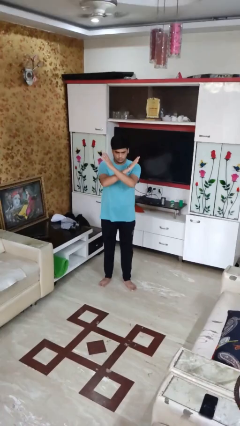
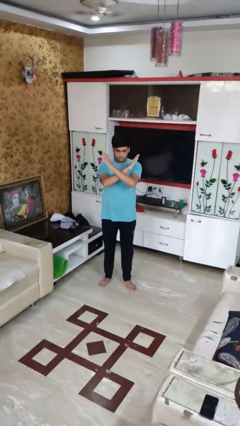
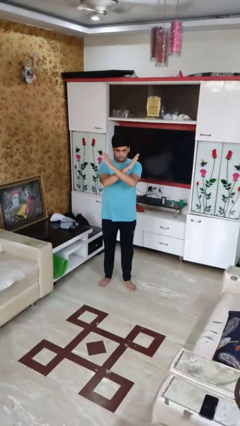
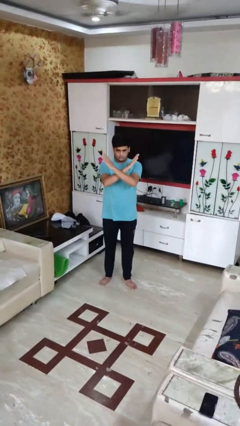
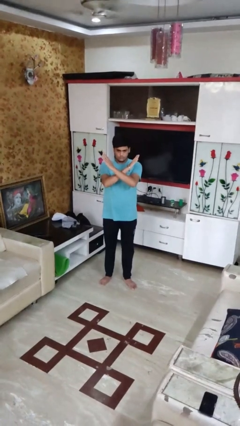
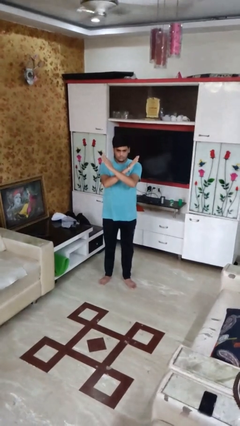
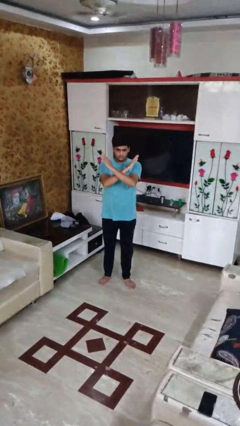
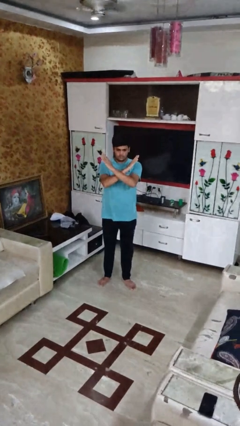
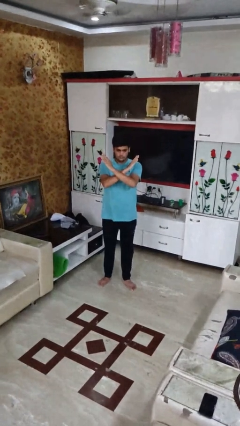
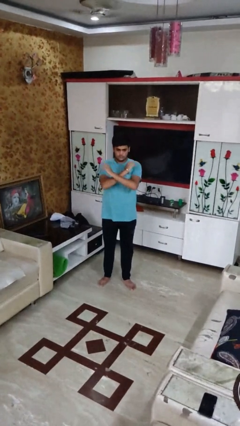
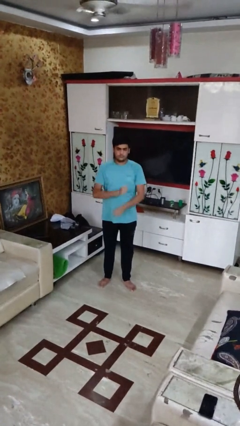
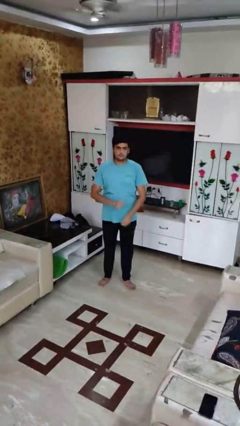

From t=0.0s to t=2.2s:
person gestures arms x

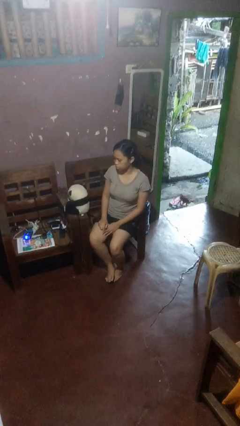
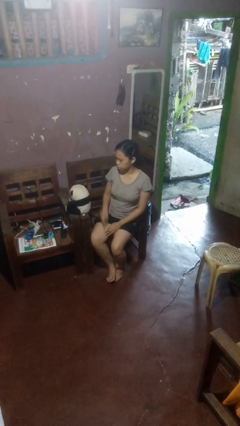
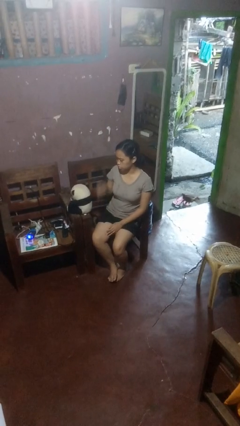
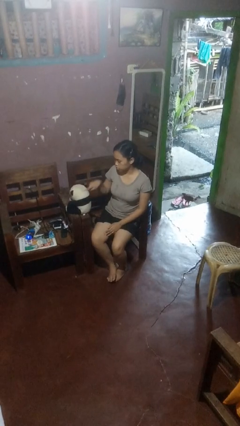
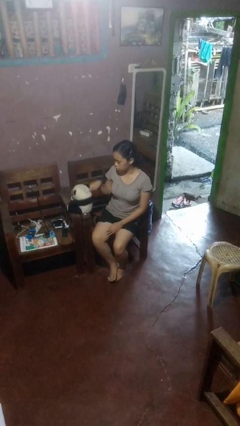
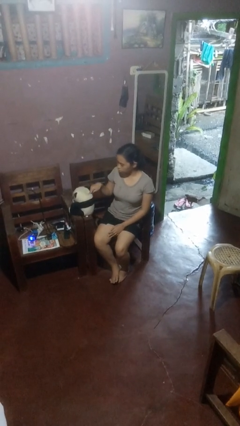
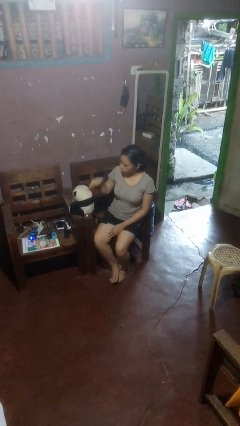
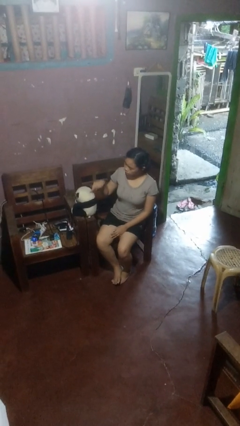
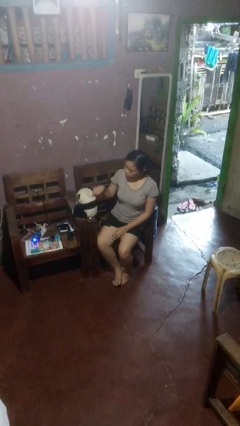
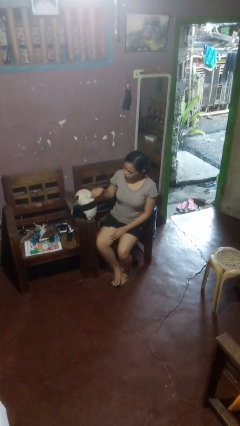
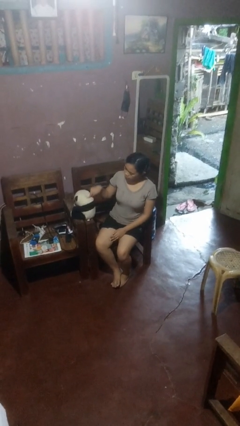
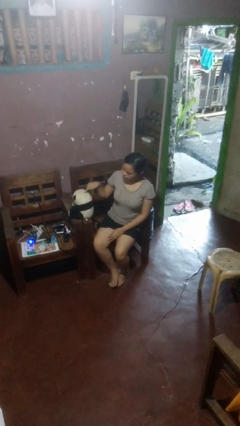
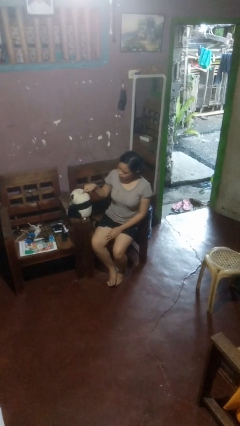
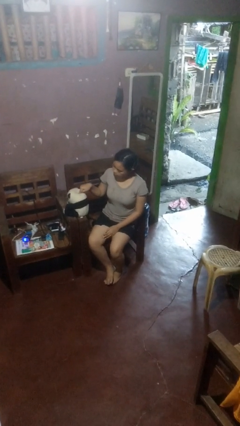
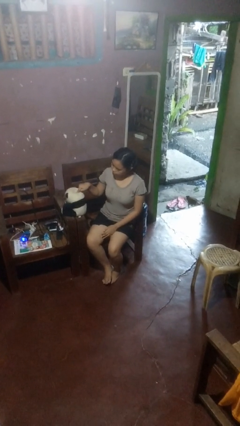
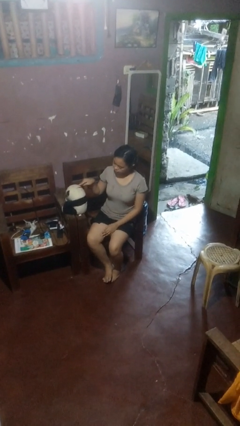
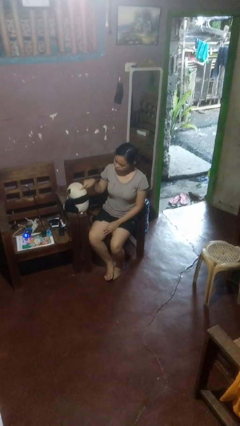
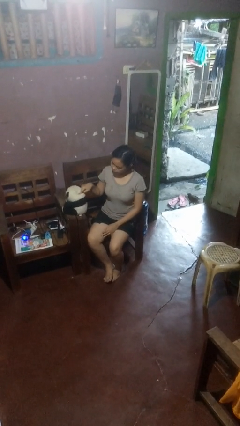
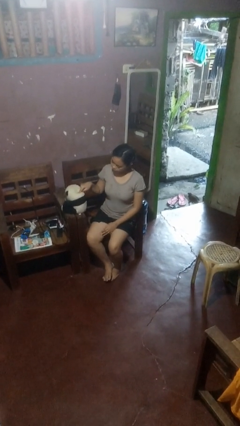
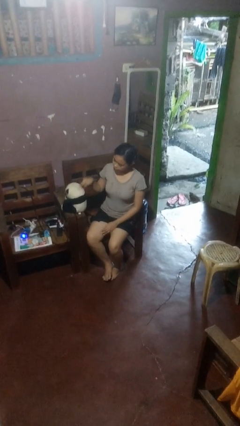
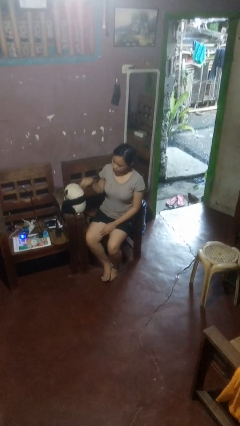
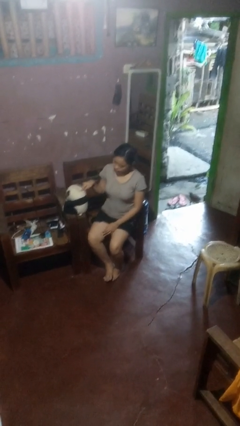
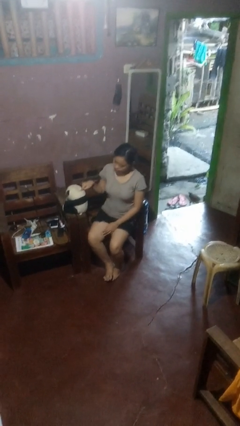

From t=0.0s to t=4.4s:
person taps object with finger

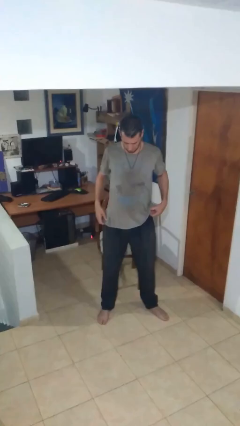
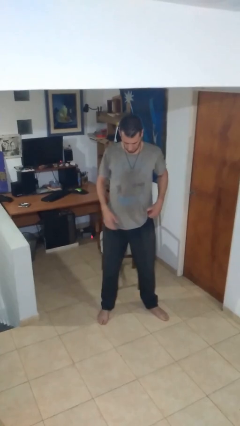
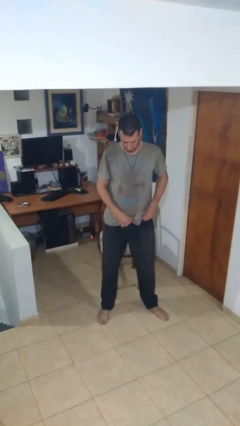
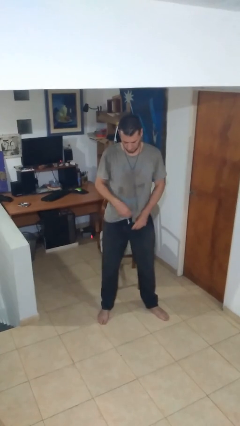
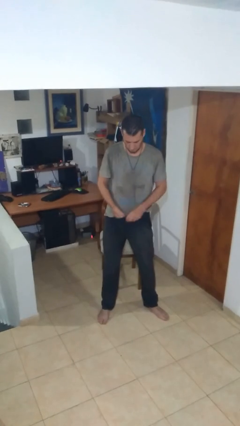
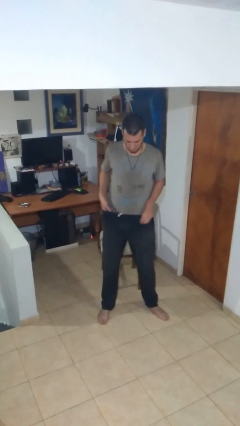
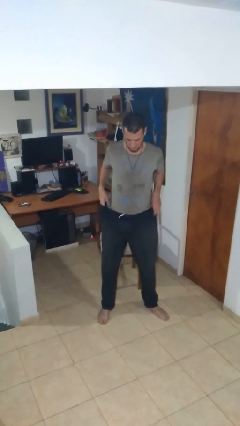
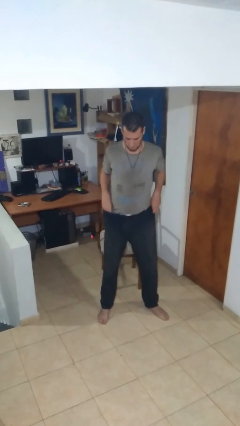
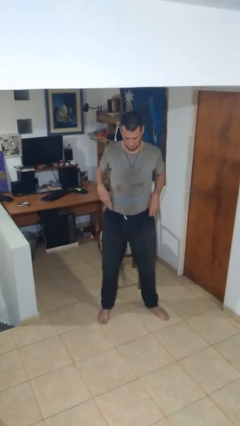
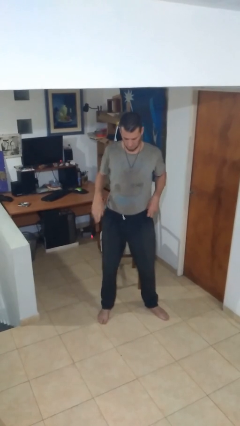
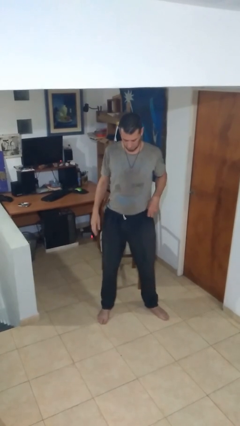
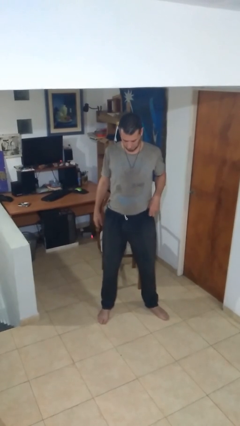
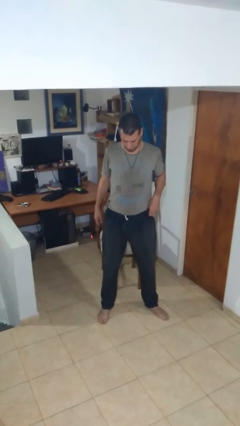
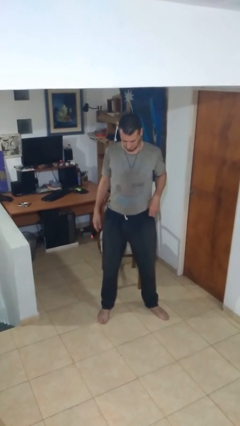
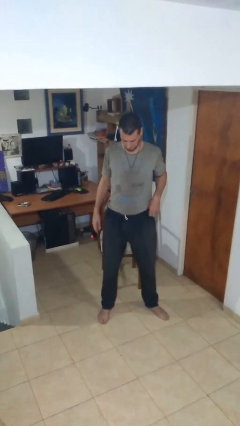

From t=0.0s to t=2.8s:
person tucks in shirt

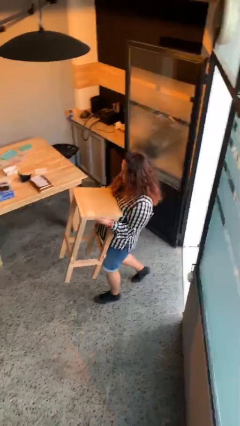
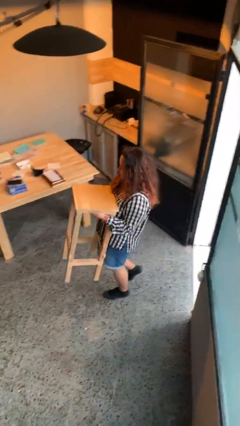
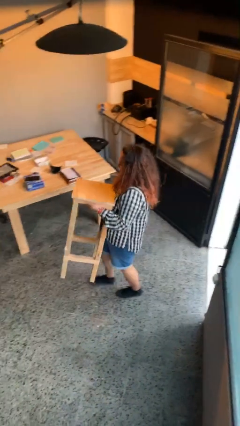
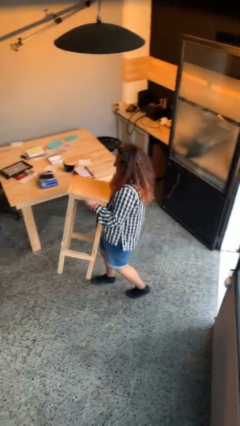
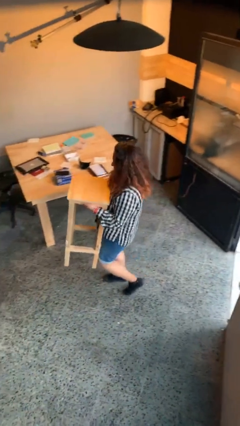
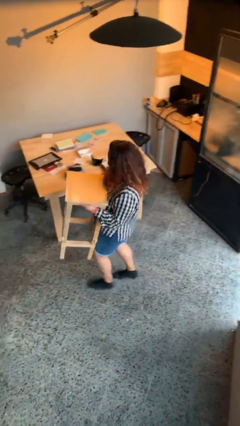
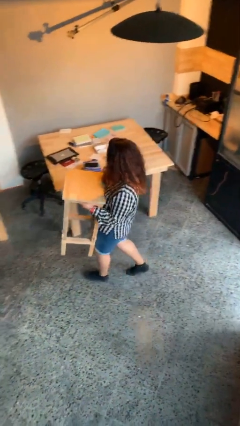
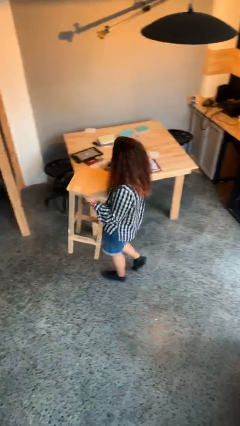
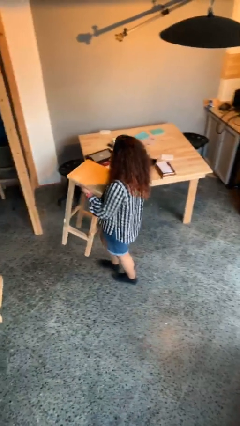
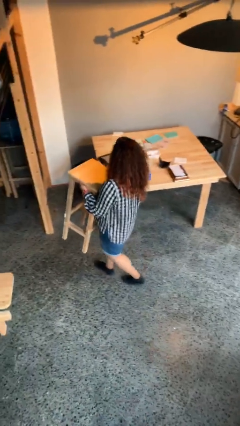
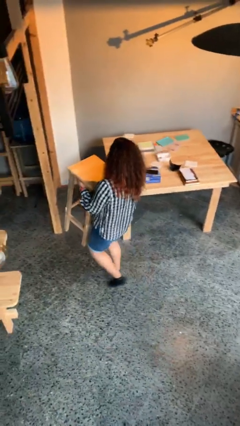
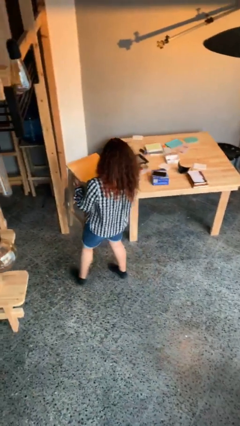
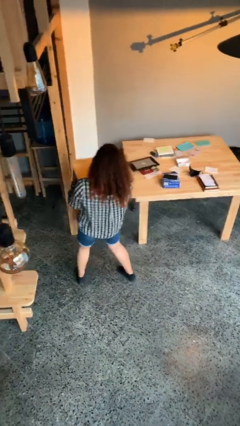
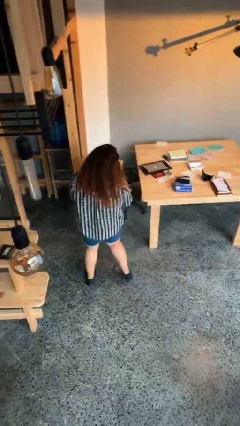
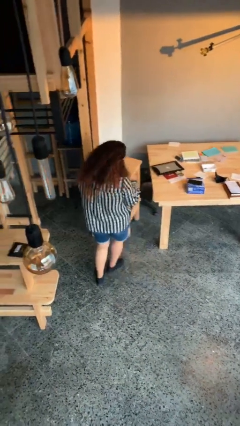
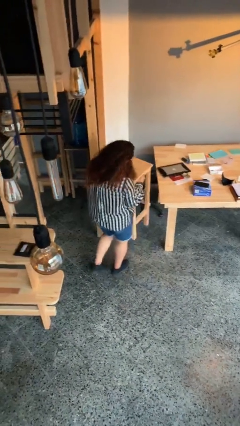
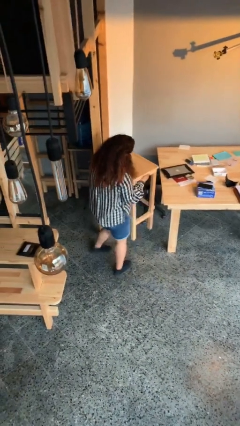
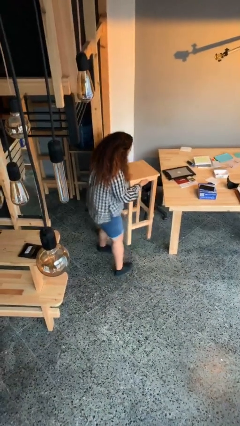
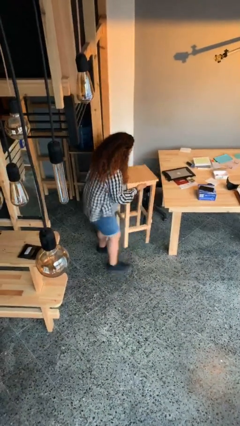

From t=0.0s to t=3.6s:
person carries heavy object

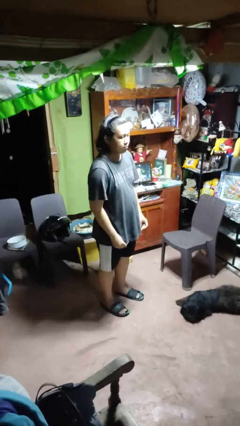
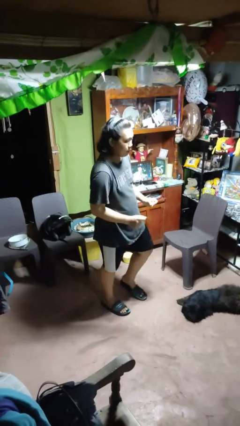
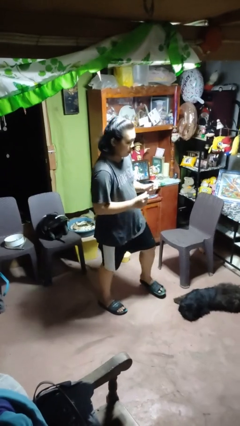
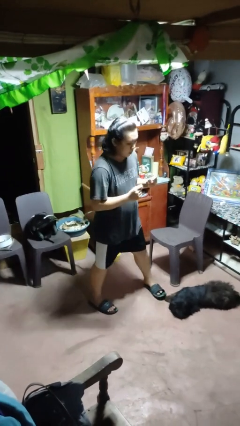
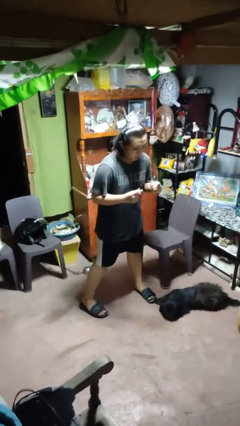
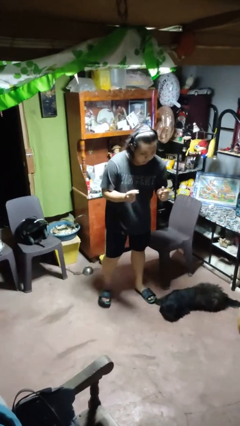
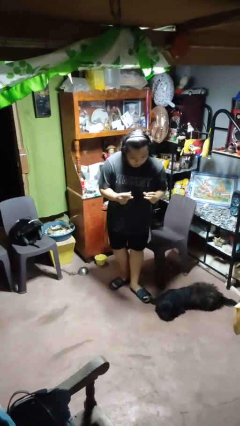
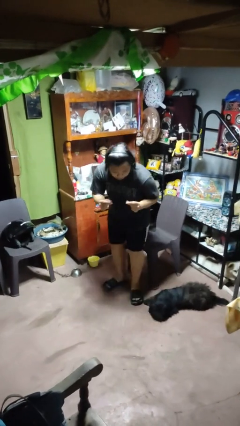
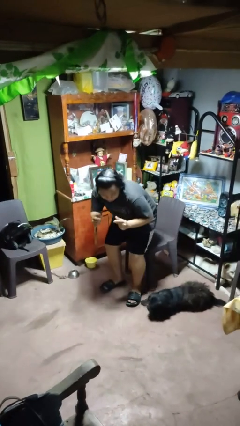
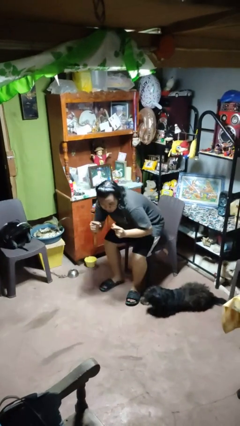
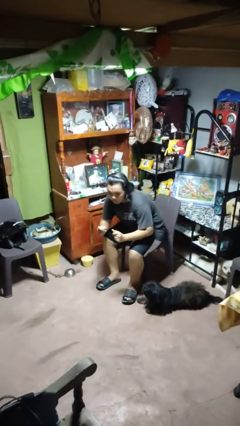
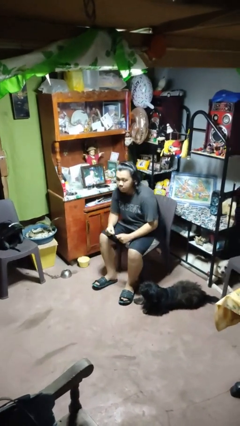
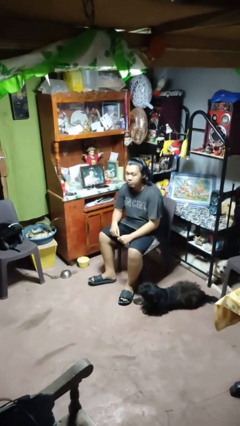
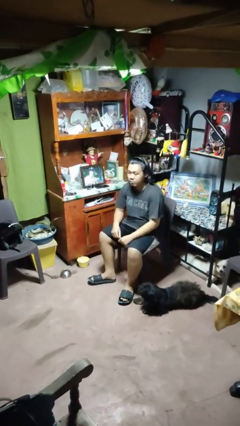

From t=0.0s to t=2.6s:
person snaps fingers

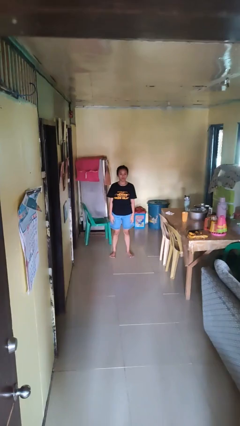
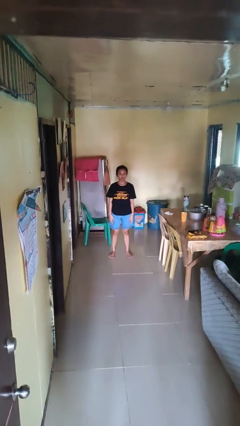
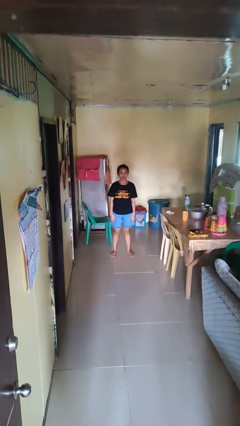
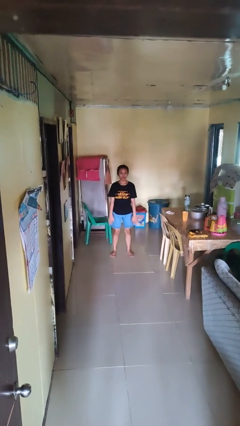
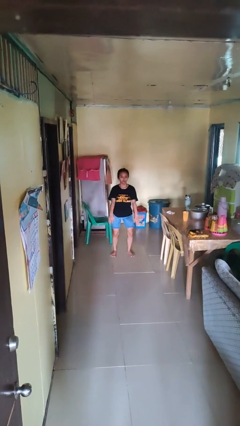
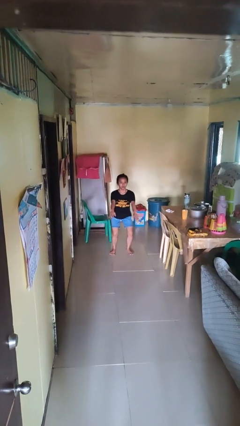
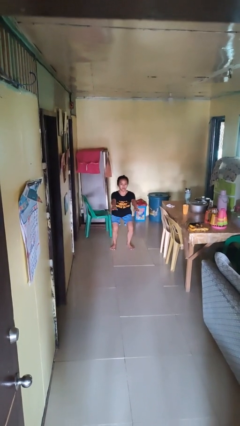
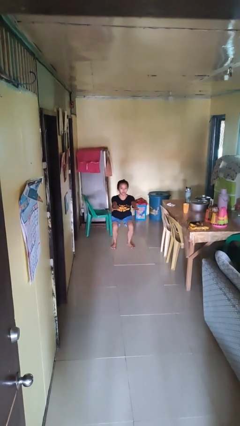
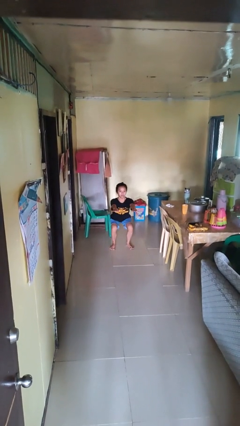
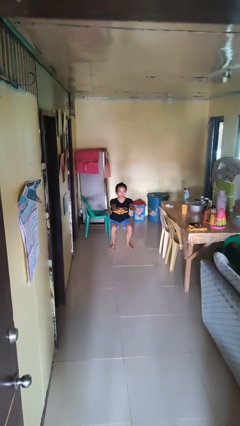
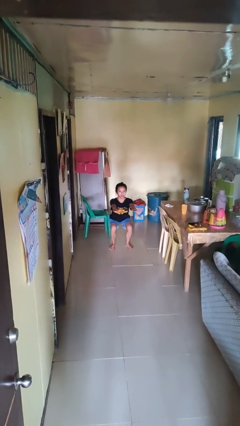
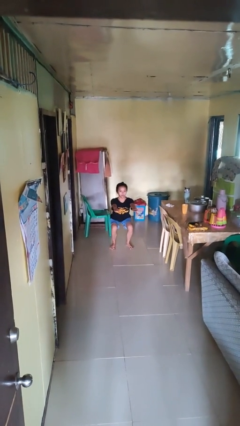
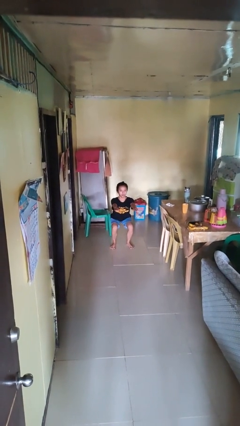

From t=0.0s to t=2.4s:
person squats
